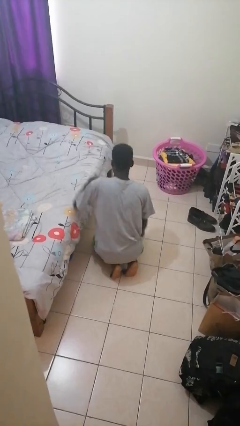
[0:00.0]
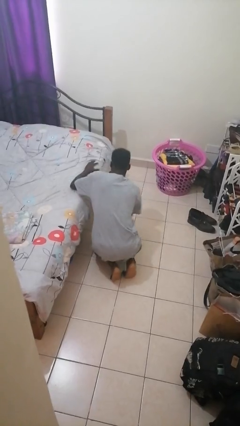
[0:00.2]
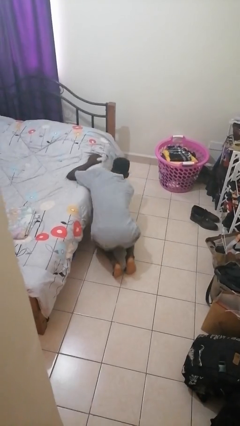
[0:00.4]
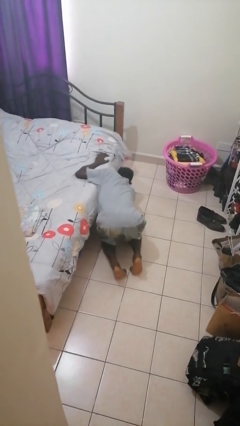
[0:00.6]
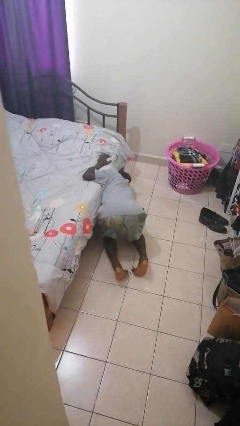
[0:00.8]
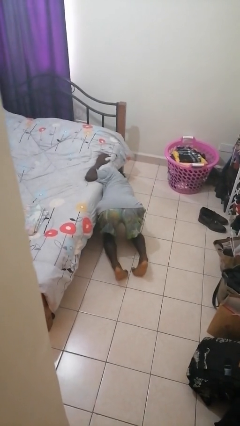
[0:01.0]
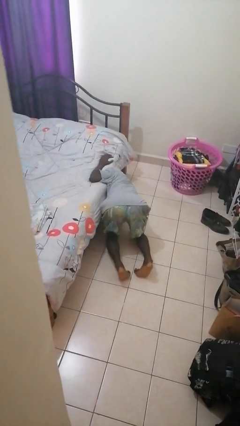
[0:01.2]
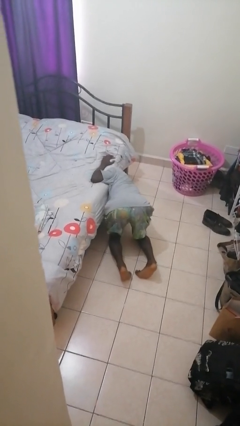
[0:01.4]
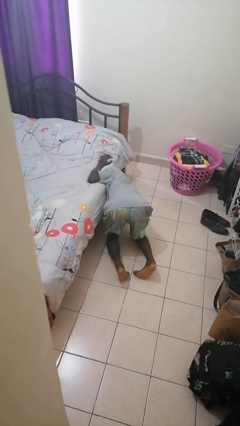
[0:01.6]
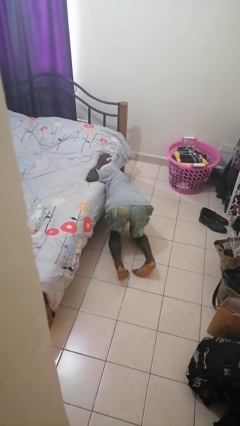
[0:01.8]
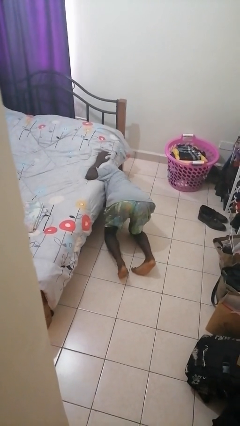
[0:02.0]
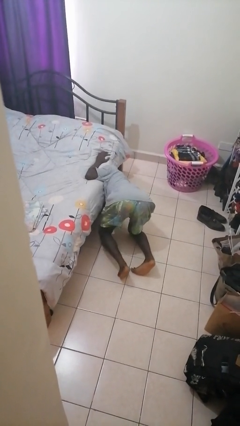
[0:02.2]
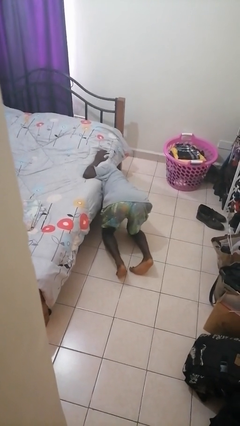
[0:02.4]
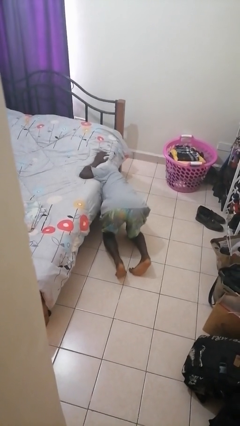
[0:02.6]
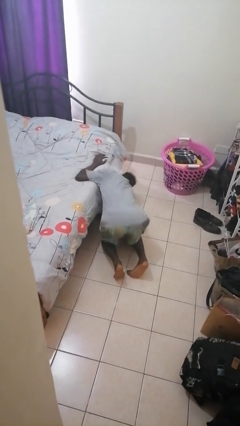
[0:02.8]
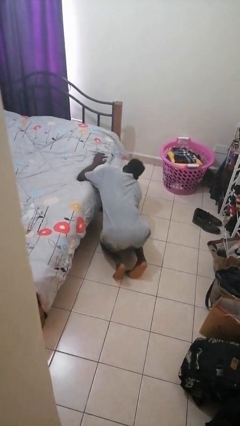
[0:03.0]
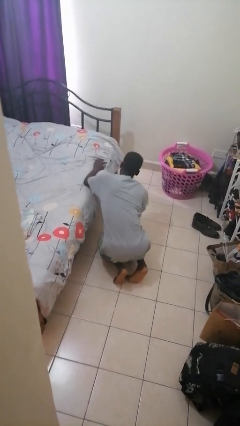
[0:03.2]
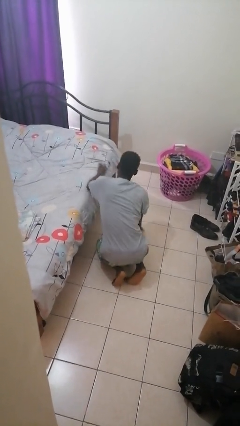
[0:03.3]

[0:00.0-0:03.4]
person searches under bed

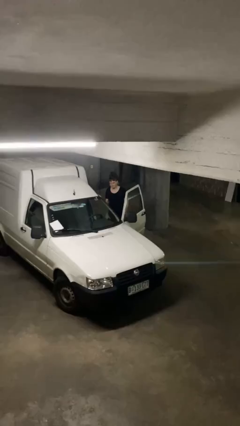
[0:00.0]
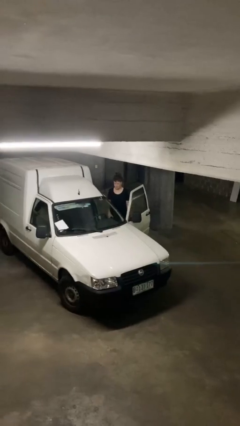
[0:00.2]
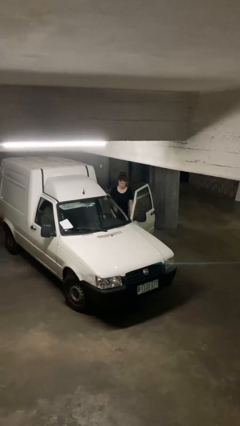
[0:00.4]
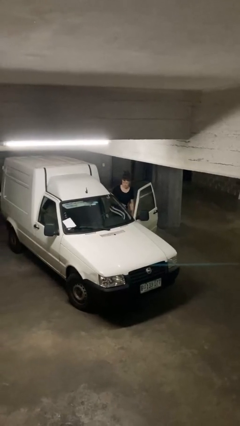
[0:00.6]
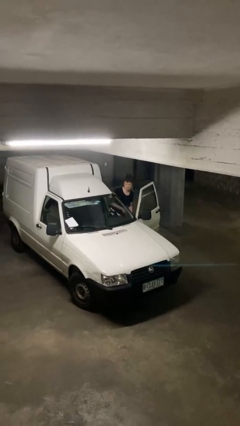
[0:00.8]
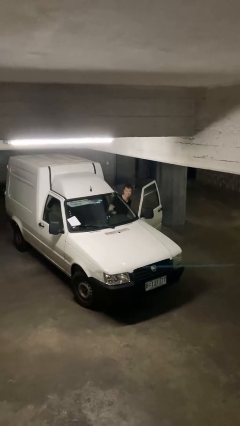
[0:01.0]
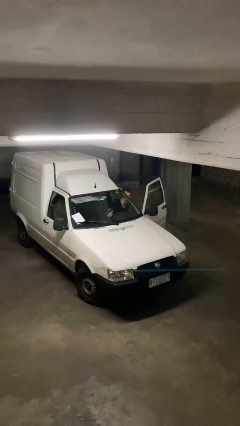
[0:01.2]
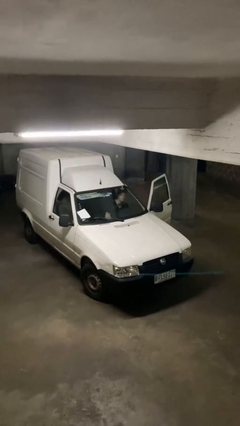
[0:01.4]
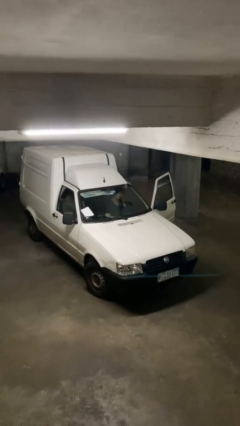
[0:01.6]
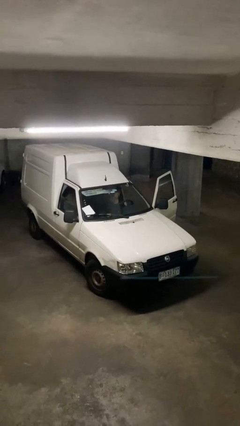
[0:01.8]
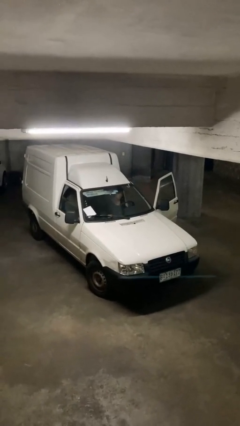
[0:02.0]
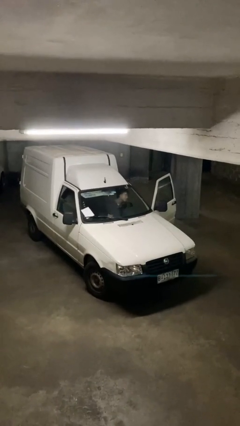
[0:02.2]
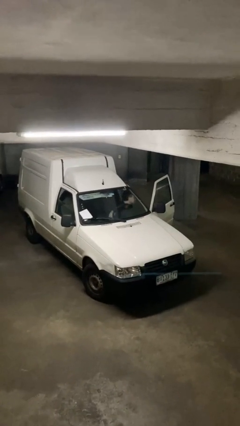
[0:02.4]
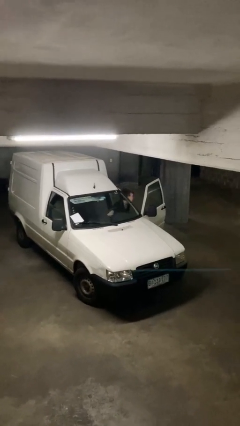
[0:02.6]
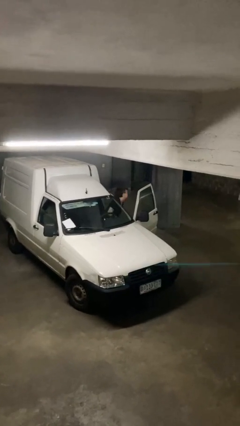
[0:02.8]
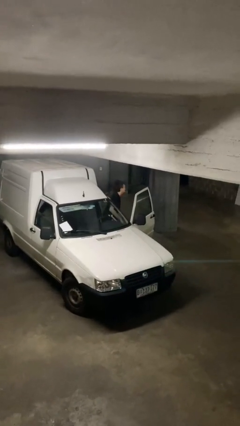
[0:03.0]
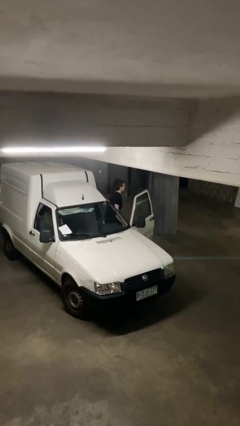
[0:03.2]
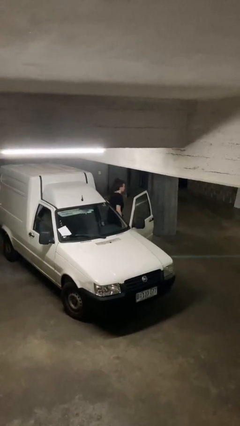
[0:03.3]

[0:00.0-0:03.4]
person enters car

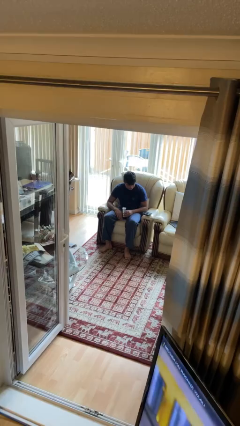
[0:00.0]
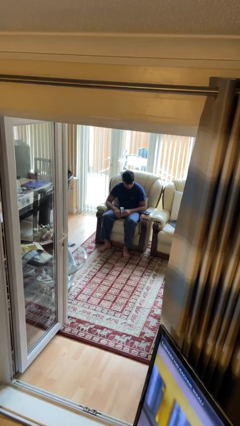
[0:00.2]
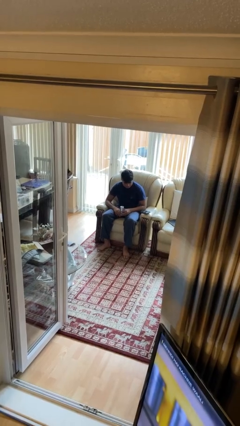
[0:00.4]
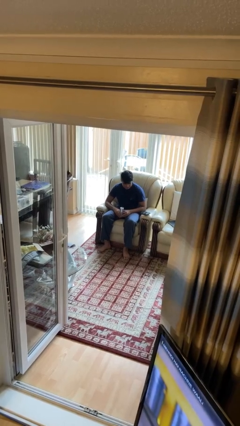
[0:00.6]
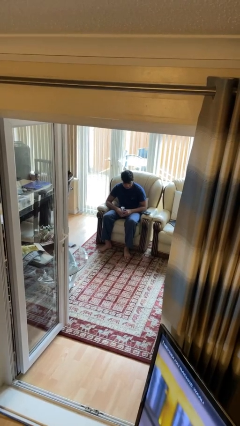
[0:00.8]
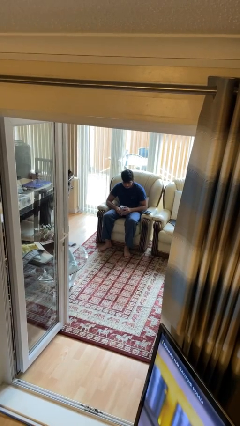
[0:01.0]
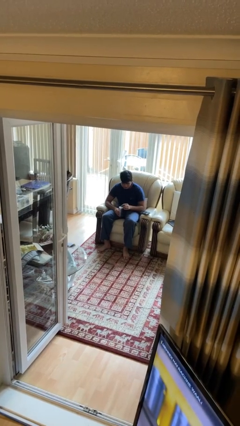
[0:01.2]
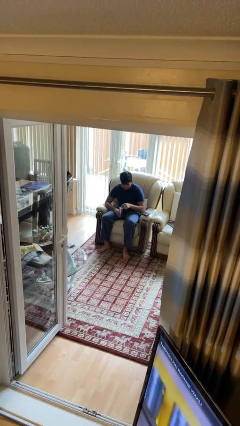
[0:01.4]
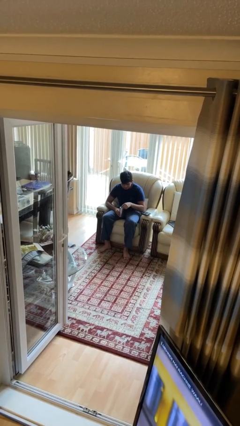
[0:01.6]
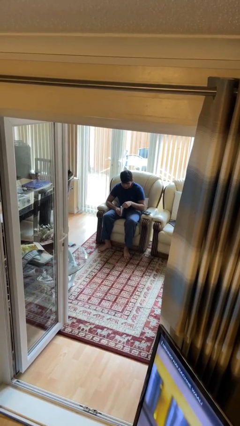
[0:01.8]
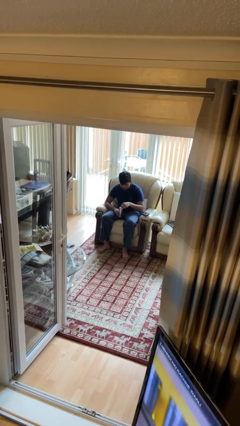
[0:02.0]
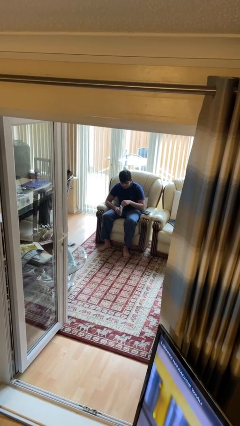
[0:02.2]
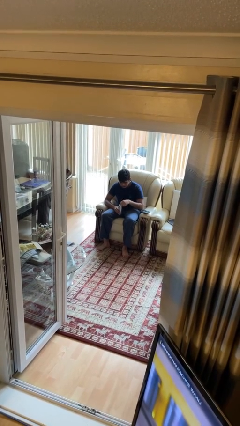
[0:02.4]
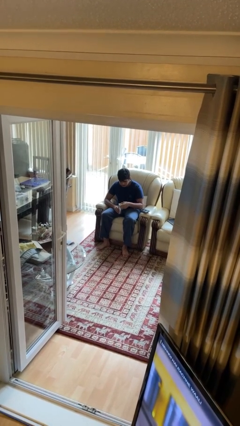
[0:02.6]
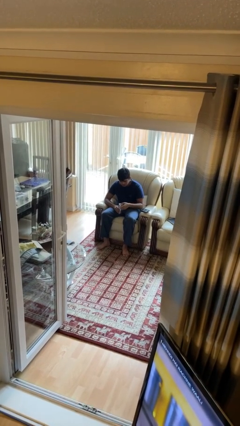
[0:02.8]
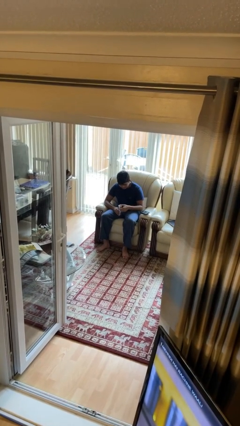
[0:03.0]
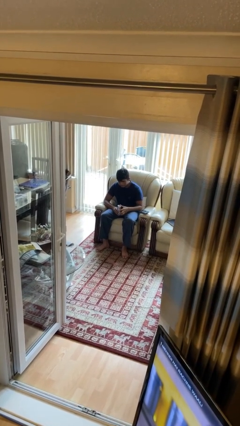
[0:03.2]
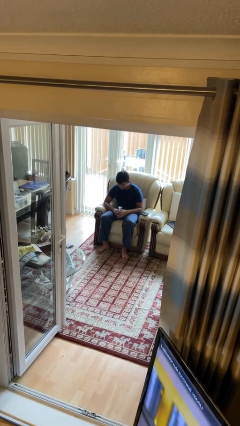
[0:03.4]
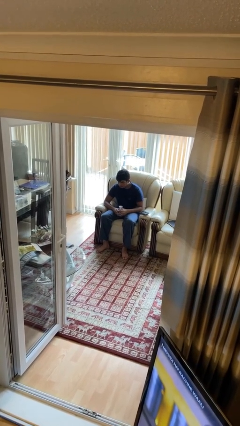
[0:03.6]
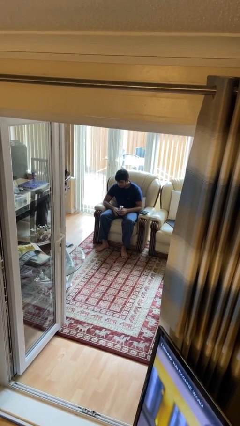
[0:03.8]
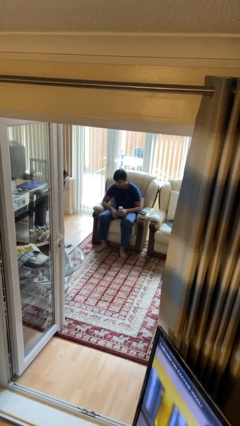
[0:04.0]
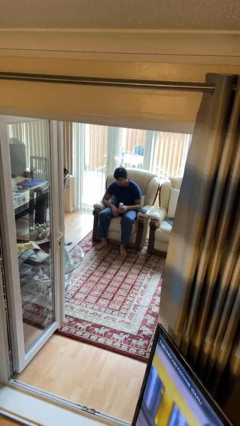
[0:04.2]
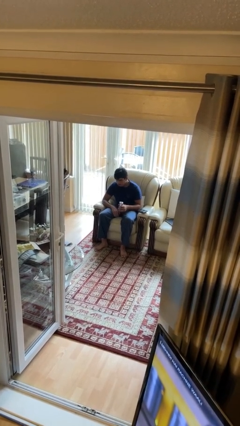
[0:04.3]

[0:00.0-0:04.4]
person opens beverage can

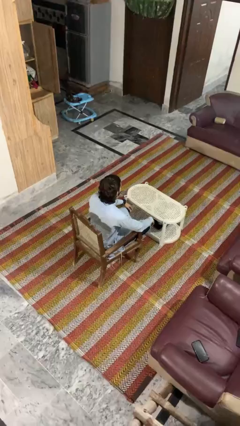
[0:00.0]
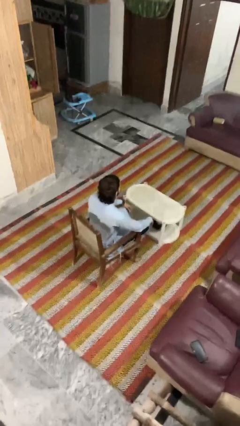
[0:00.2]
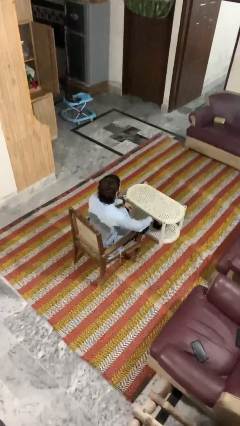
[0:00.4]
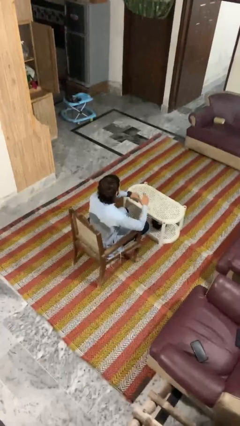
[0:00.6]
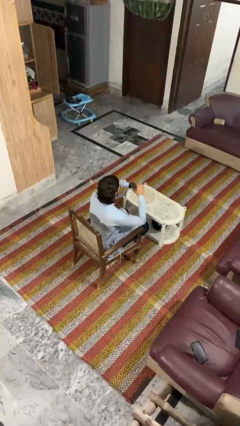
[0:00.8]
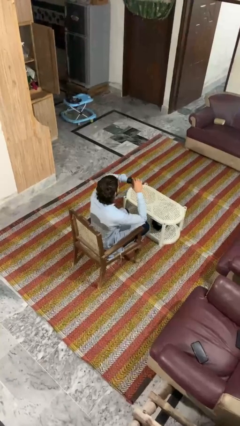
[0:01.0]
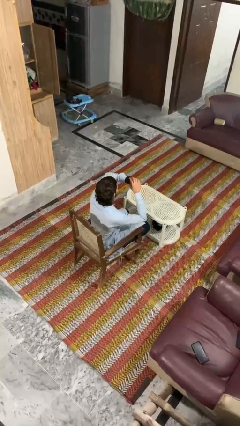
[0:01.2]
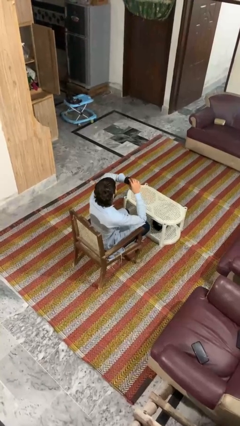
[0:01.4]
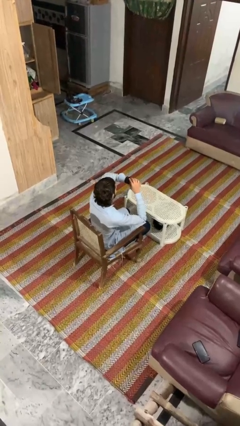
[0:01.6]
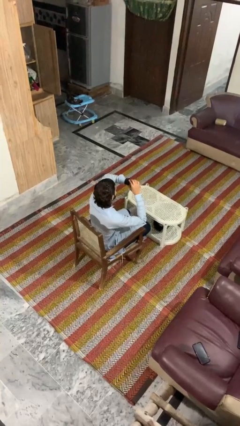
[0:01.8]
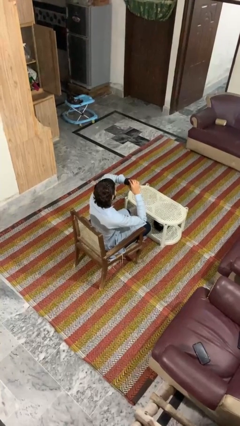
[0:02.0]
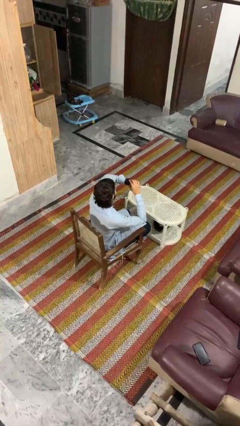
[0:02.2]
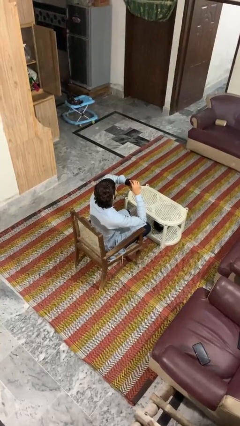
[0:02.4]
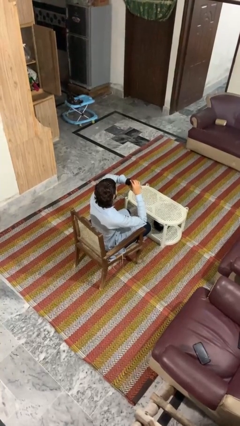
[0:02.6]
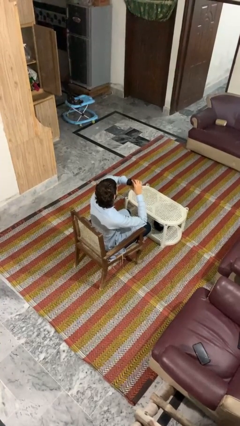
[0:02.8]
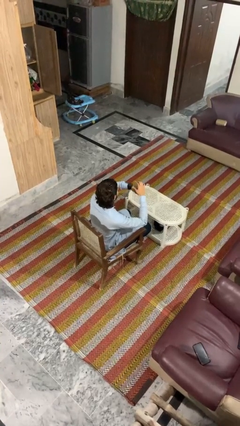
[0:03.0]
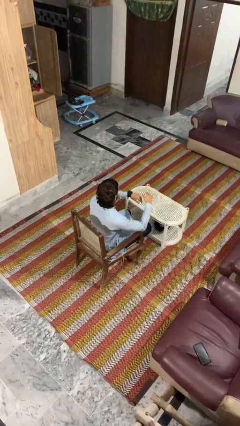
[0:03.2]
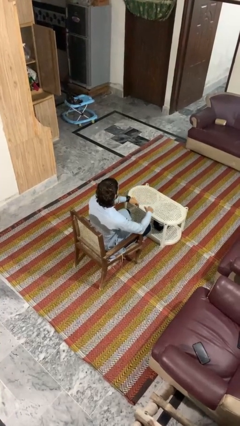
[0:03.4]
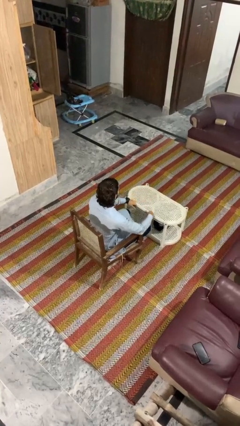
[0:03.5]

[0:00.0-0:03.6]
person looks at wristwatch

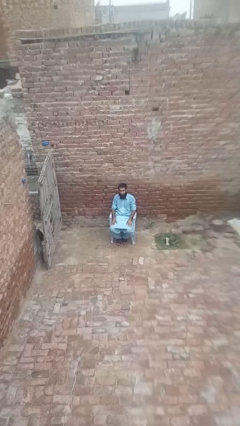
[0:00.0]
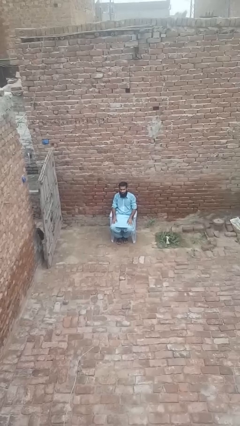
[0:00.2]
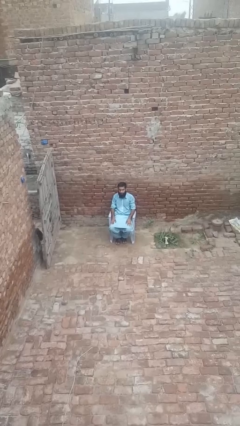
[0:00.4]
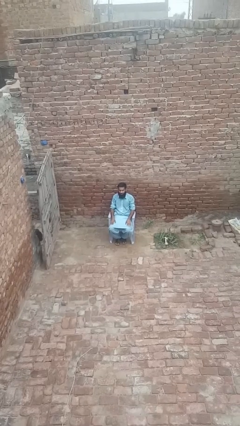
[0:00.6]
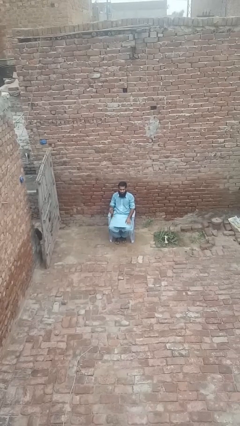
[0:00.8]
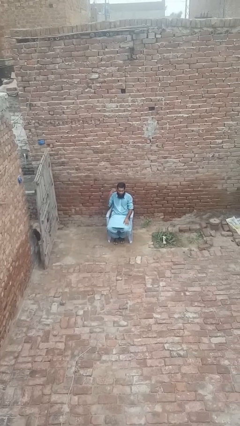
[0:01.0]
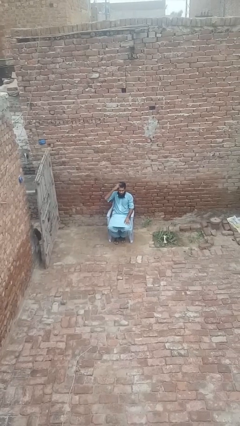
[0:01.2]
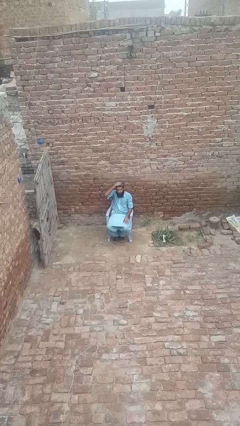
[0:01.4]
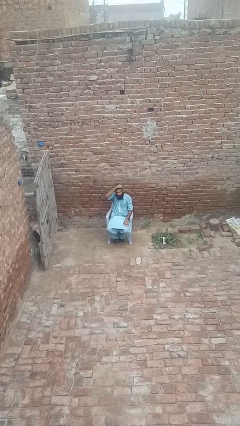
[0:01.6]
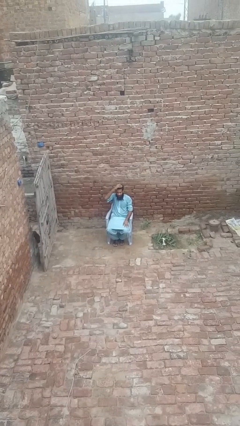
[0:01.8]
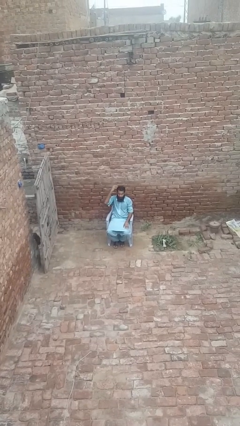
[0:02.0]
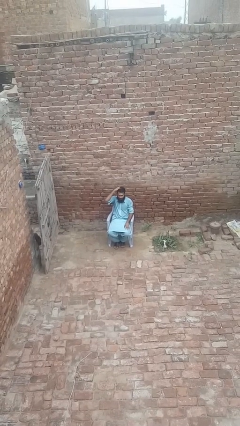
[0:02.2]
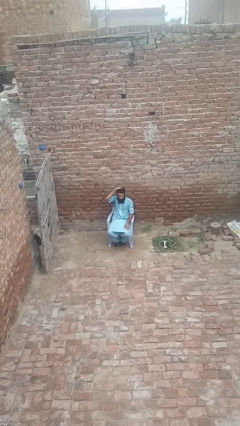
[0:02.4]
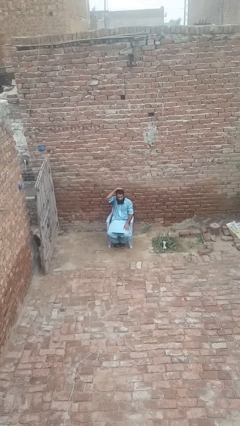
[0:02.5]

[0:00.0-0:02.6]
person strokes hair

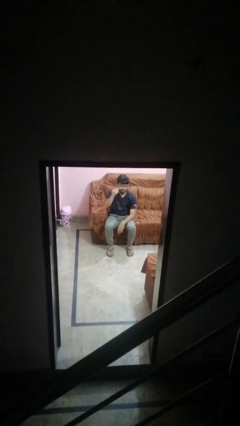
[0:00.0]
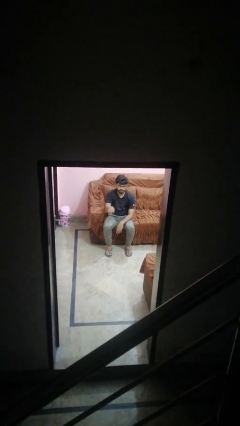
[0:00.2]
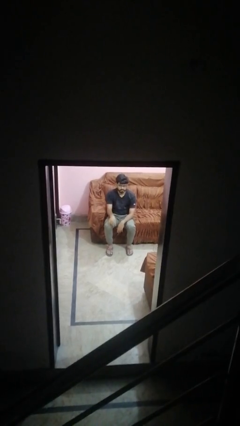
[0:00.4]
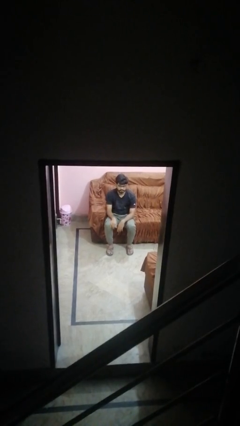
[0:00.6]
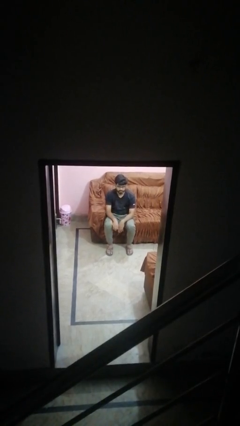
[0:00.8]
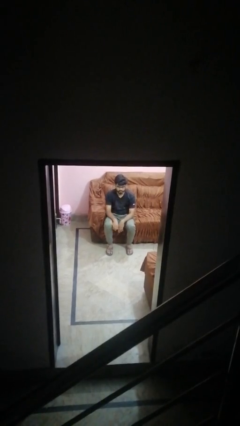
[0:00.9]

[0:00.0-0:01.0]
person gestures lower hand
